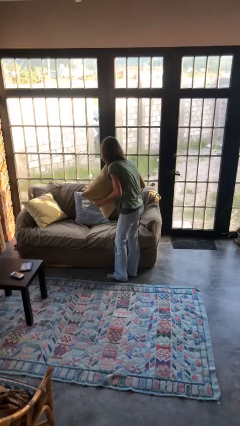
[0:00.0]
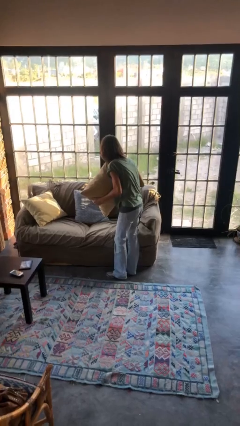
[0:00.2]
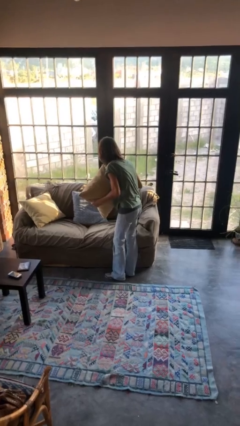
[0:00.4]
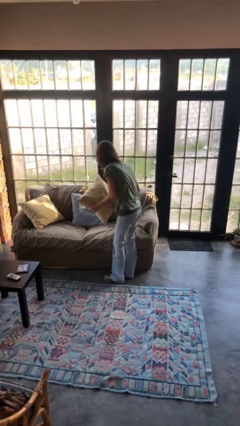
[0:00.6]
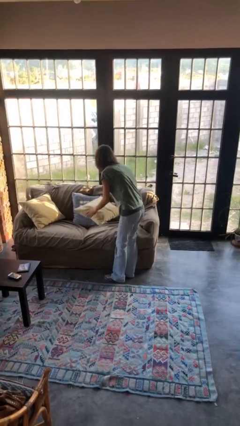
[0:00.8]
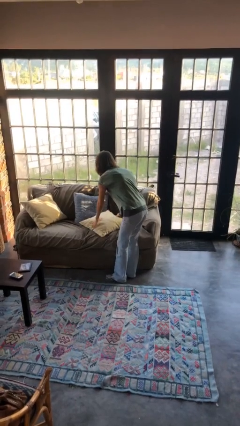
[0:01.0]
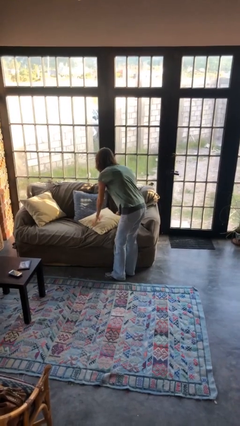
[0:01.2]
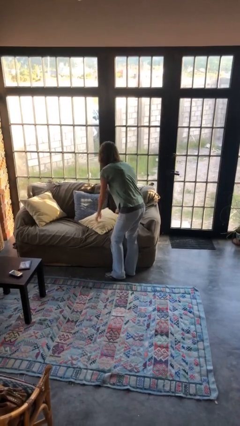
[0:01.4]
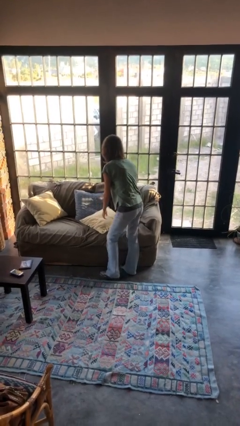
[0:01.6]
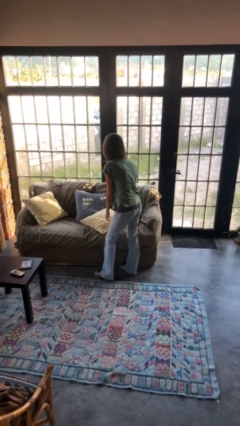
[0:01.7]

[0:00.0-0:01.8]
person puts down object on couch

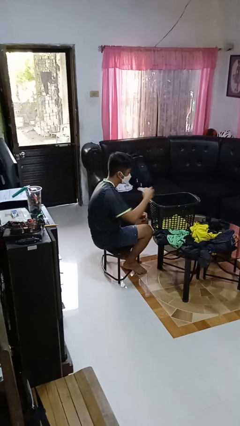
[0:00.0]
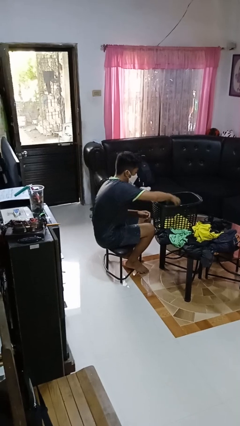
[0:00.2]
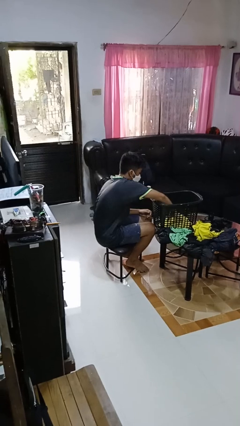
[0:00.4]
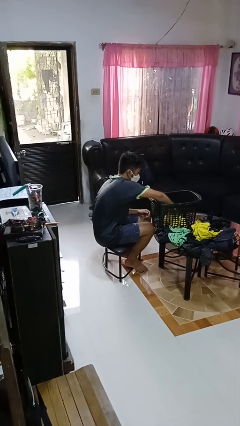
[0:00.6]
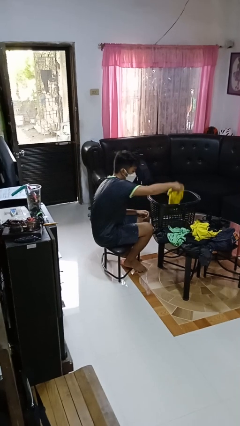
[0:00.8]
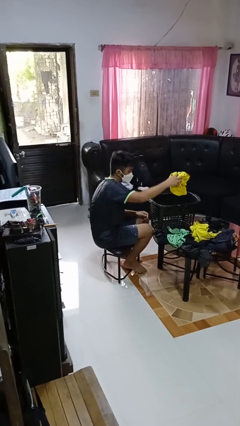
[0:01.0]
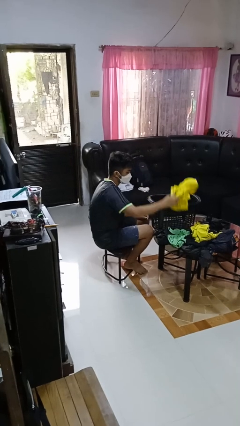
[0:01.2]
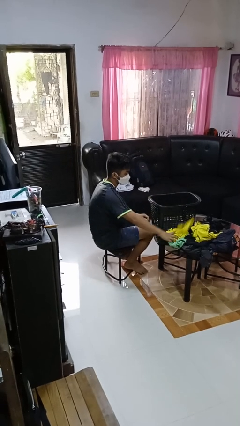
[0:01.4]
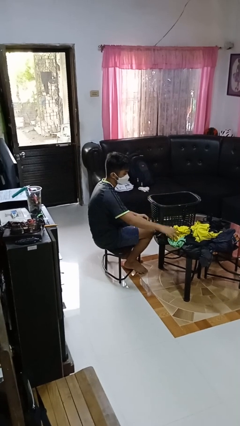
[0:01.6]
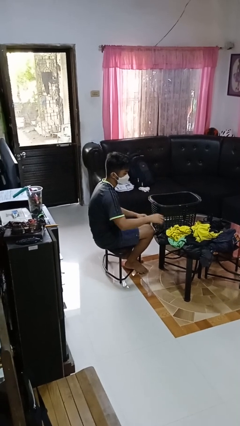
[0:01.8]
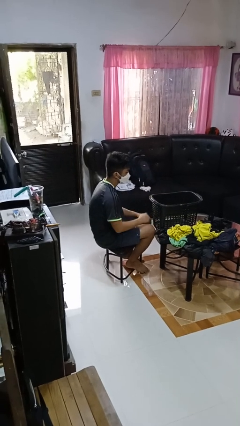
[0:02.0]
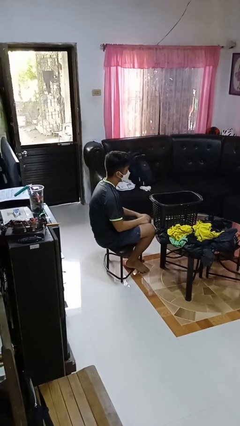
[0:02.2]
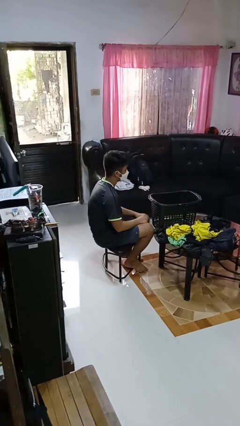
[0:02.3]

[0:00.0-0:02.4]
person takes object from basket

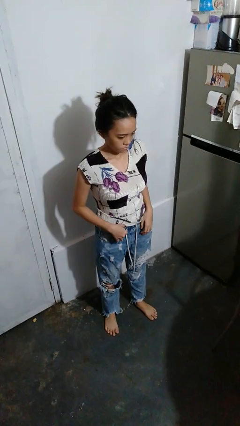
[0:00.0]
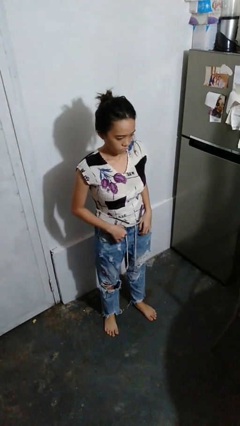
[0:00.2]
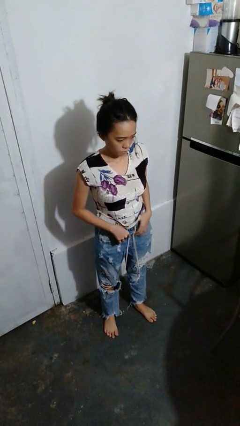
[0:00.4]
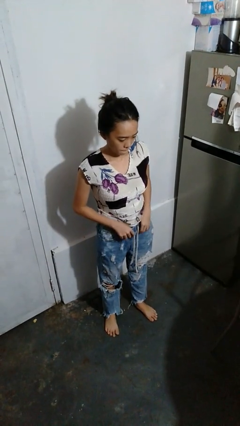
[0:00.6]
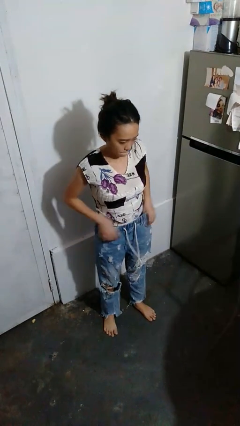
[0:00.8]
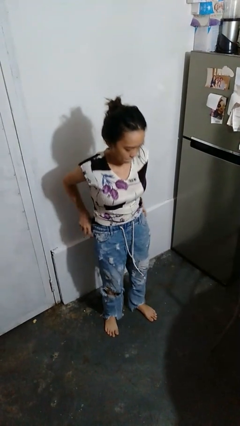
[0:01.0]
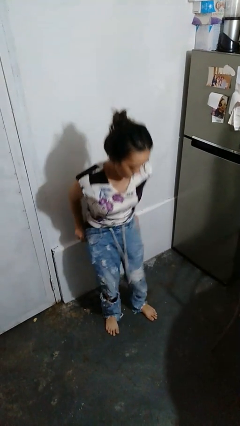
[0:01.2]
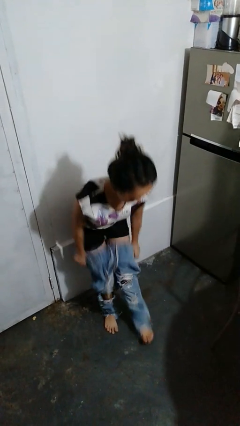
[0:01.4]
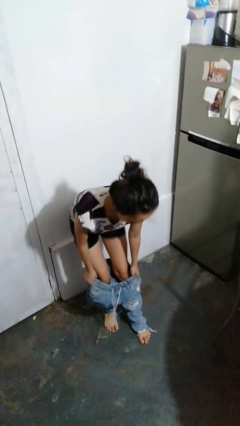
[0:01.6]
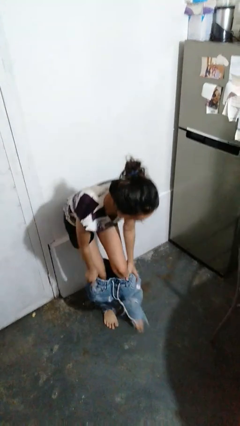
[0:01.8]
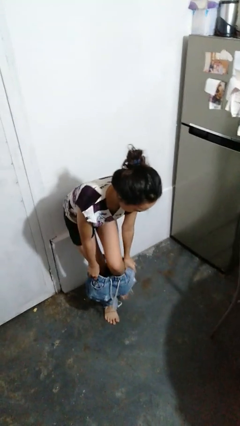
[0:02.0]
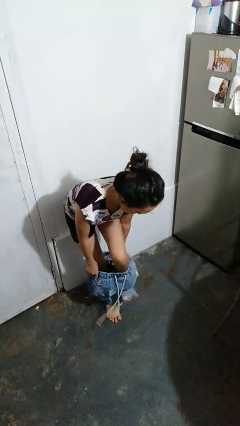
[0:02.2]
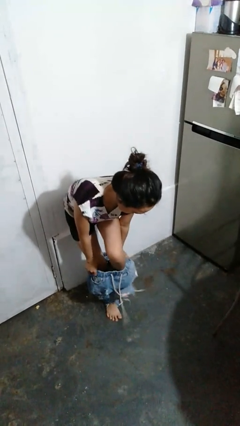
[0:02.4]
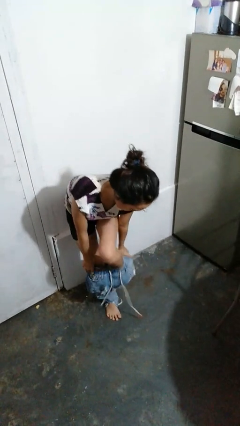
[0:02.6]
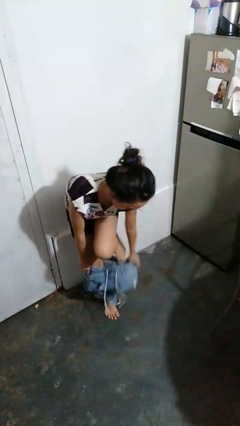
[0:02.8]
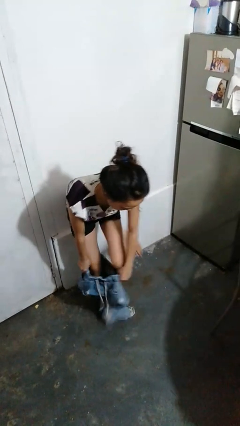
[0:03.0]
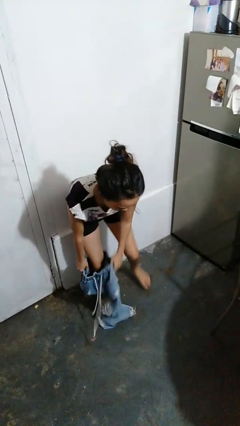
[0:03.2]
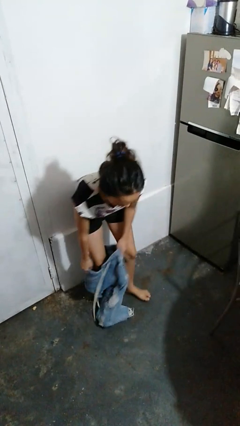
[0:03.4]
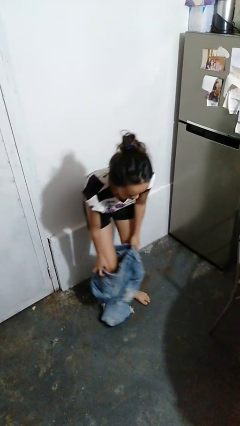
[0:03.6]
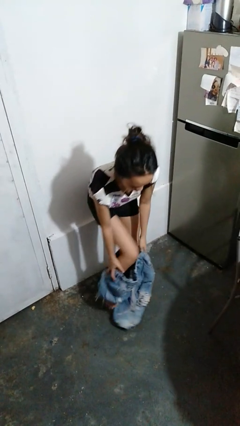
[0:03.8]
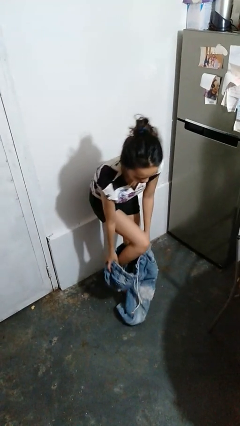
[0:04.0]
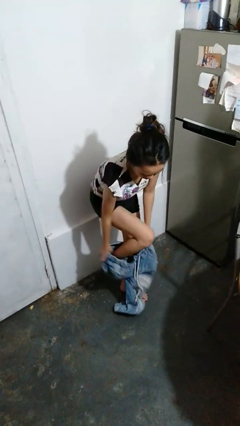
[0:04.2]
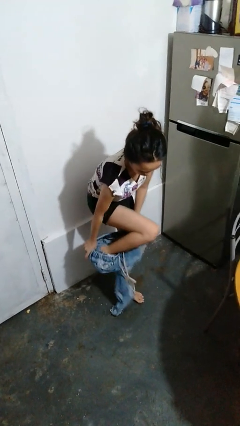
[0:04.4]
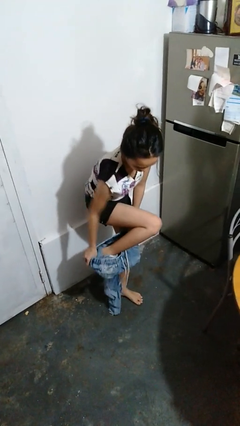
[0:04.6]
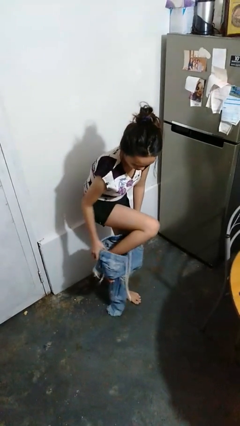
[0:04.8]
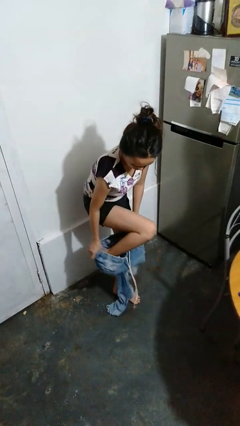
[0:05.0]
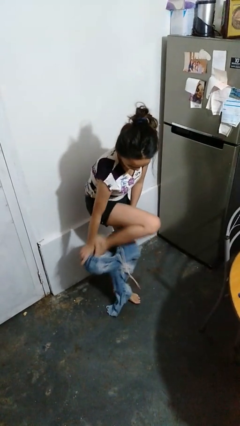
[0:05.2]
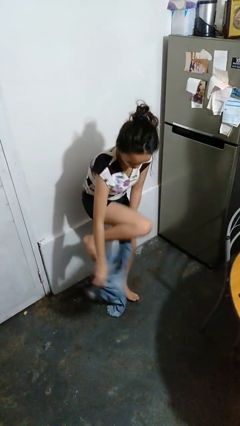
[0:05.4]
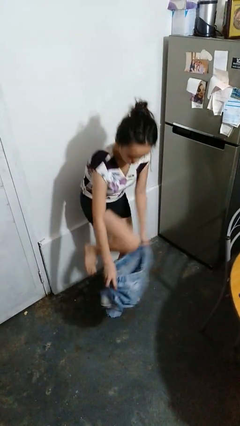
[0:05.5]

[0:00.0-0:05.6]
person takes off pants

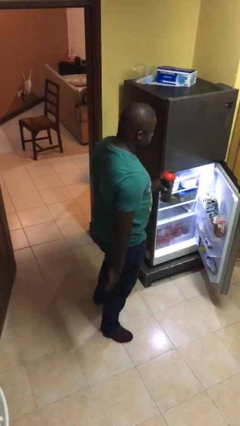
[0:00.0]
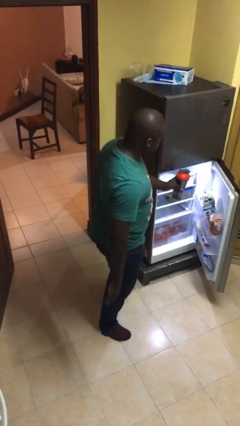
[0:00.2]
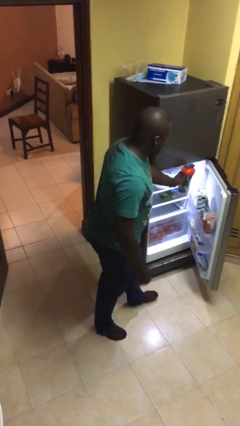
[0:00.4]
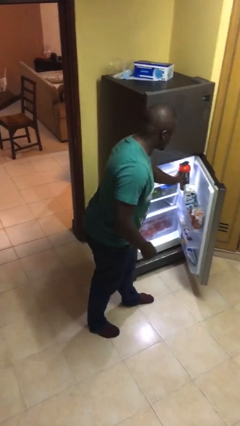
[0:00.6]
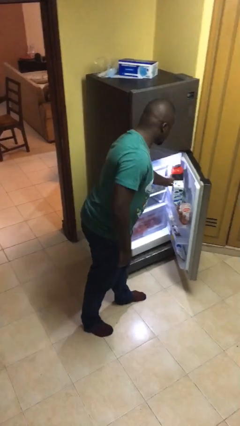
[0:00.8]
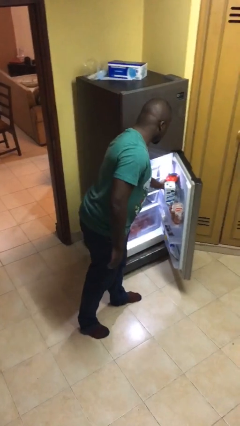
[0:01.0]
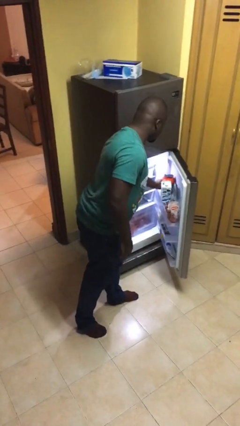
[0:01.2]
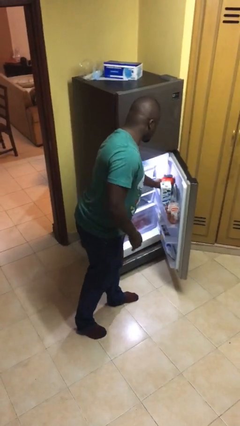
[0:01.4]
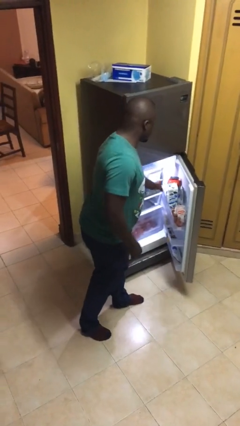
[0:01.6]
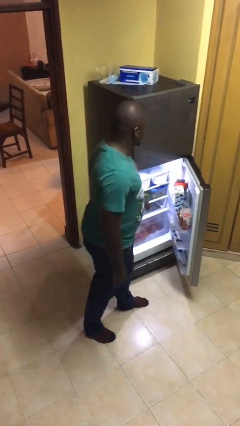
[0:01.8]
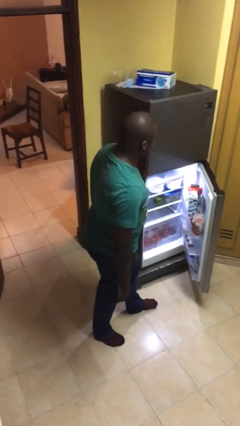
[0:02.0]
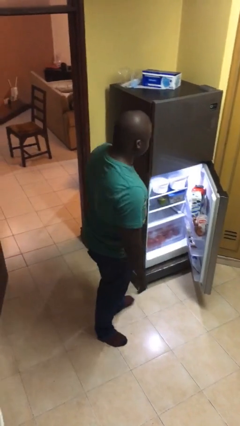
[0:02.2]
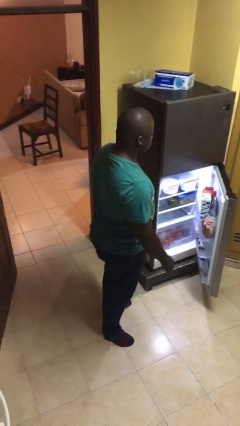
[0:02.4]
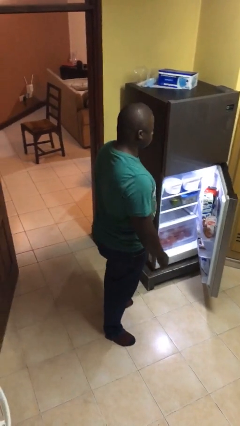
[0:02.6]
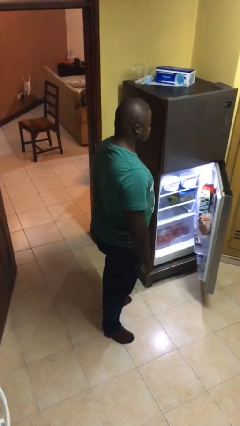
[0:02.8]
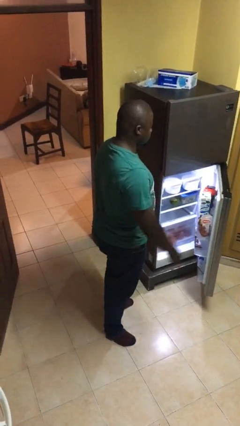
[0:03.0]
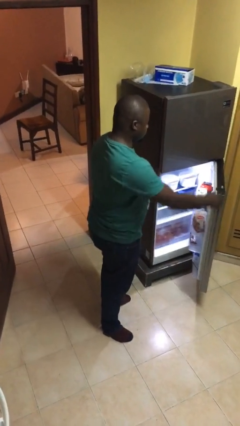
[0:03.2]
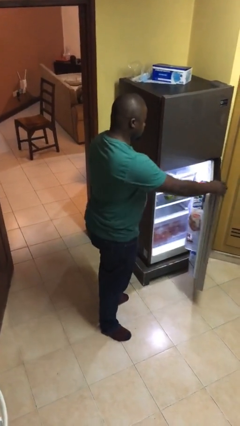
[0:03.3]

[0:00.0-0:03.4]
person puts object into refrigerator

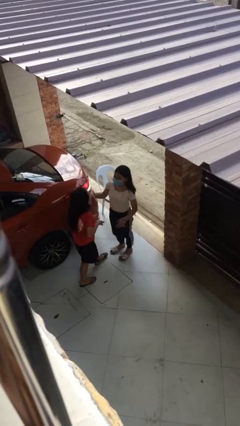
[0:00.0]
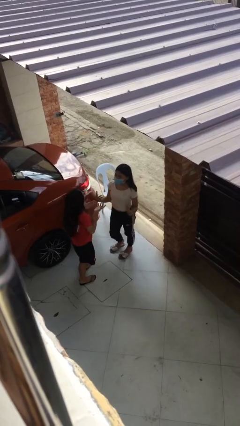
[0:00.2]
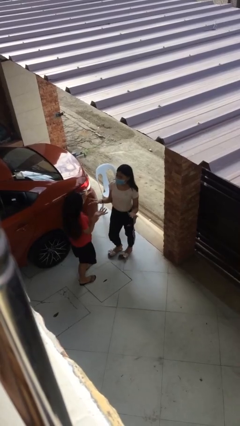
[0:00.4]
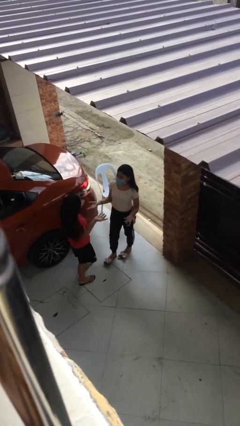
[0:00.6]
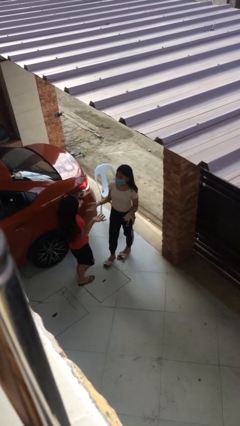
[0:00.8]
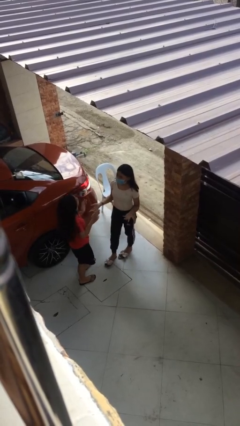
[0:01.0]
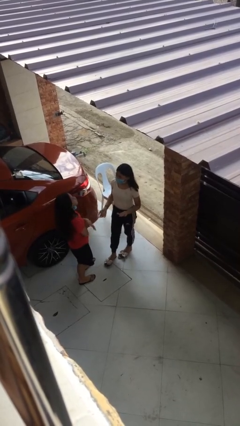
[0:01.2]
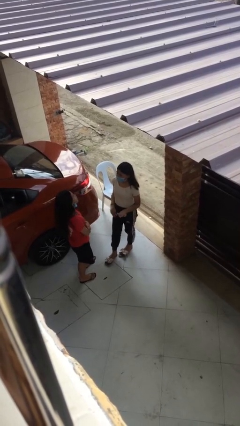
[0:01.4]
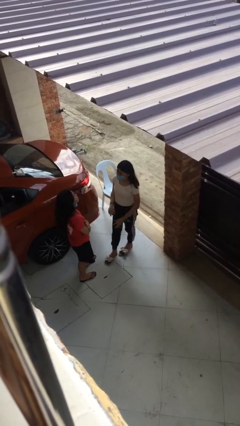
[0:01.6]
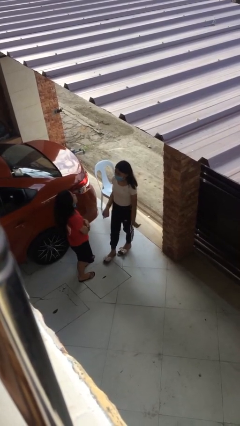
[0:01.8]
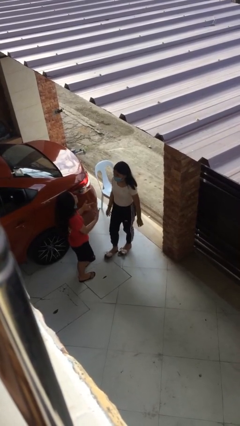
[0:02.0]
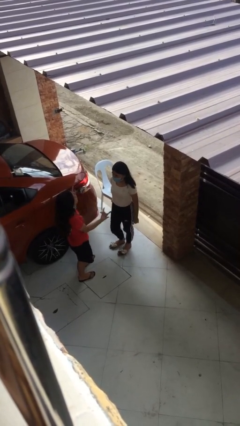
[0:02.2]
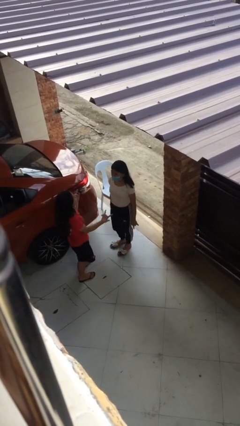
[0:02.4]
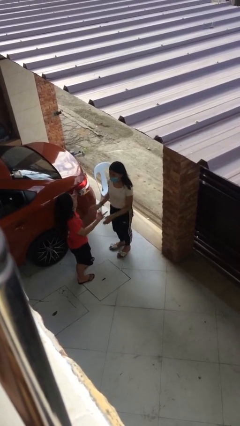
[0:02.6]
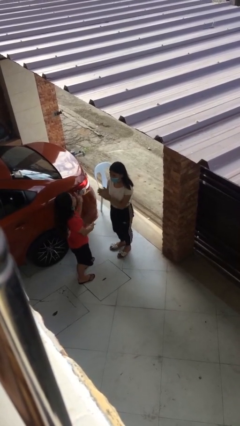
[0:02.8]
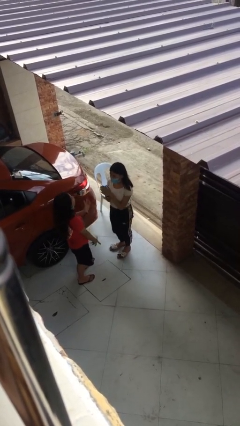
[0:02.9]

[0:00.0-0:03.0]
person talks to person

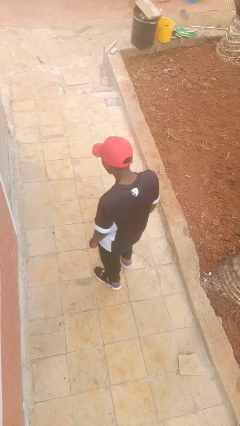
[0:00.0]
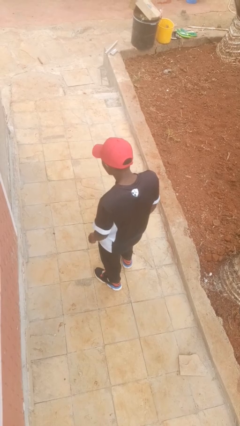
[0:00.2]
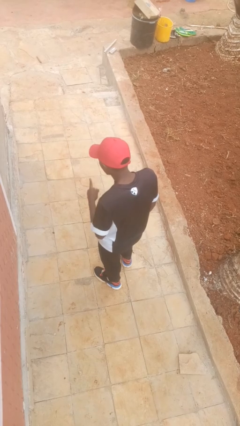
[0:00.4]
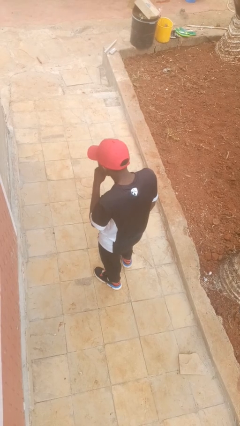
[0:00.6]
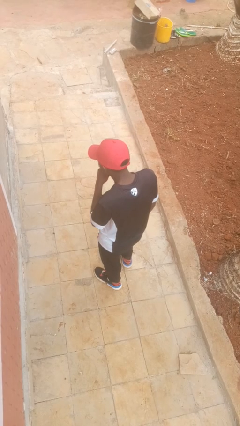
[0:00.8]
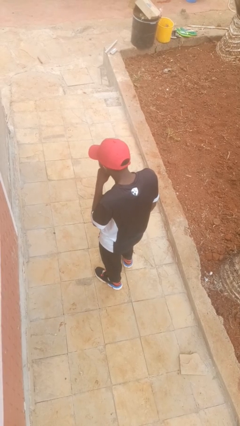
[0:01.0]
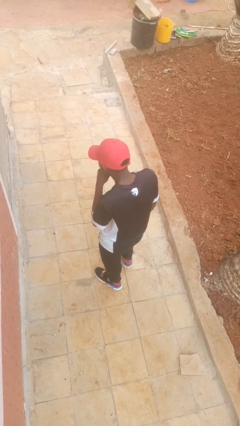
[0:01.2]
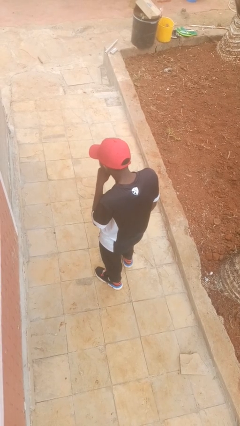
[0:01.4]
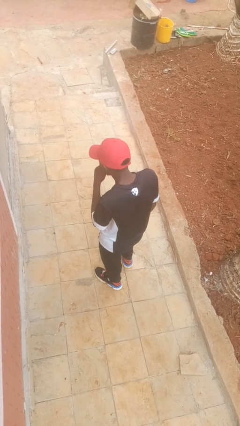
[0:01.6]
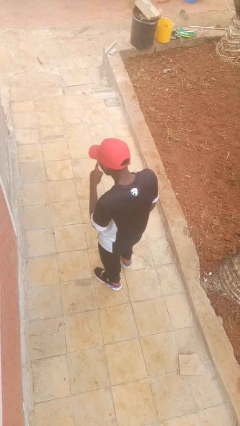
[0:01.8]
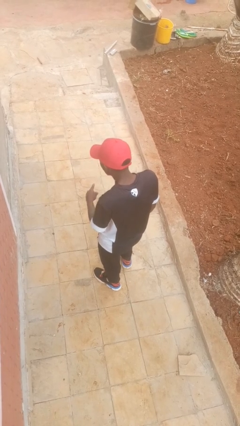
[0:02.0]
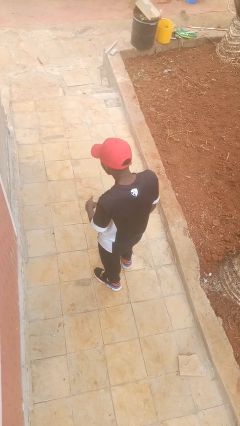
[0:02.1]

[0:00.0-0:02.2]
person gestures be quiet
